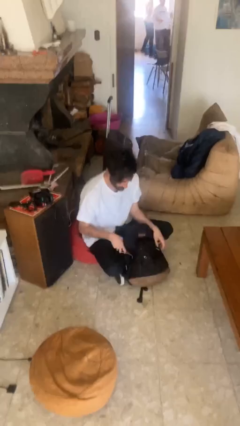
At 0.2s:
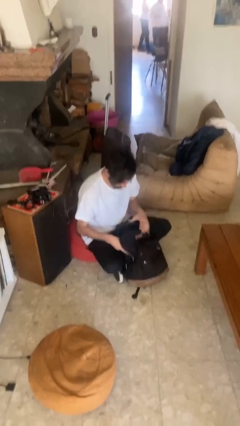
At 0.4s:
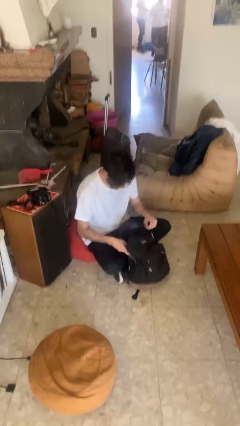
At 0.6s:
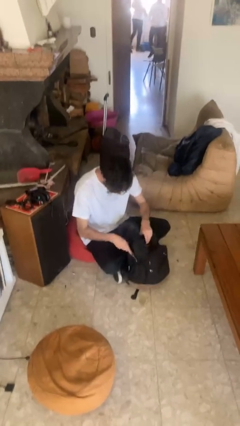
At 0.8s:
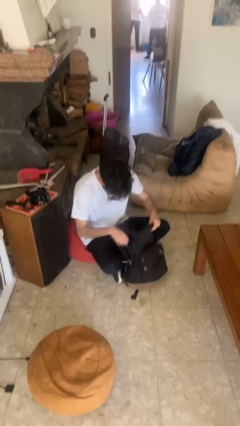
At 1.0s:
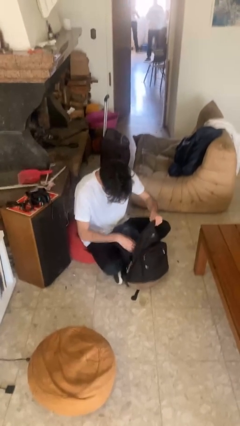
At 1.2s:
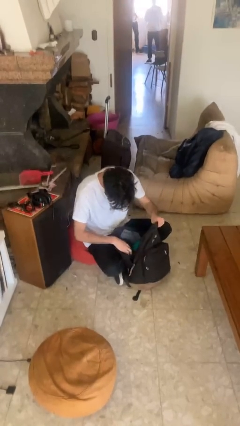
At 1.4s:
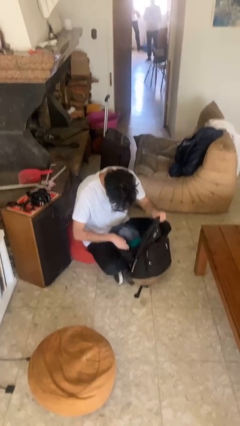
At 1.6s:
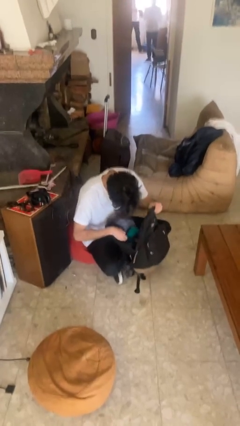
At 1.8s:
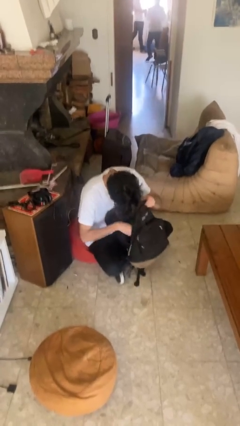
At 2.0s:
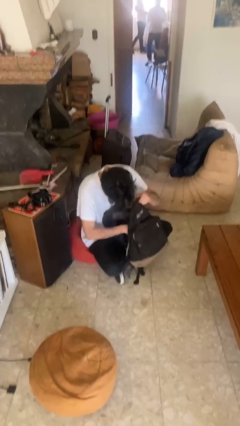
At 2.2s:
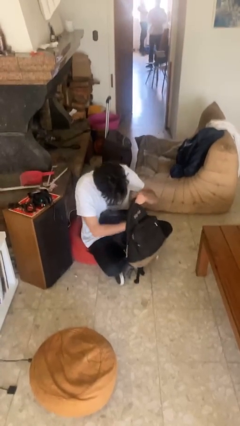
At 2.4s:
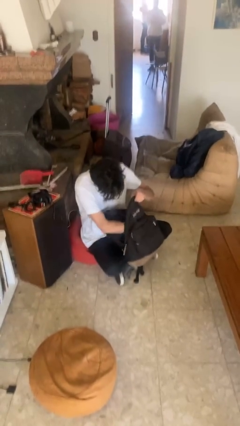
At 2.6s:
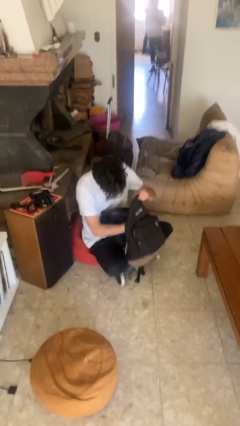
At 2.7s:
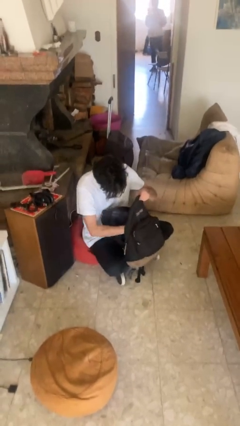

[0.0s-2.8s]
person searches in backpack

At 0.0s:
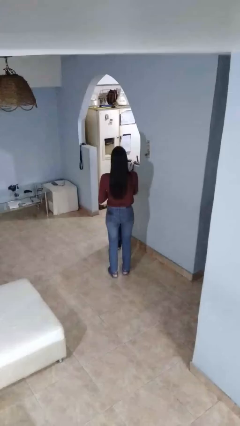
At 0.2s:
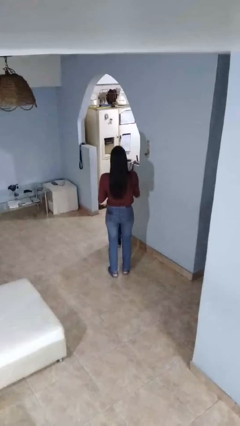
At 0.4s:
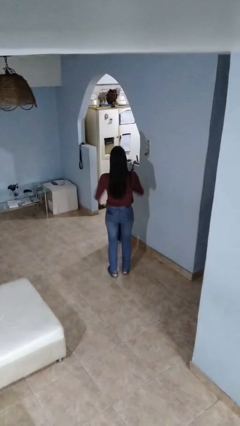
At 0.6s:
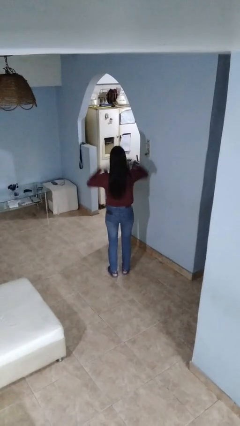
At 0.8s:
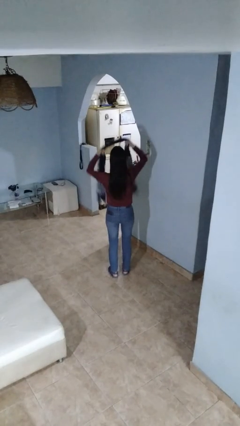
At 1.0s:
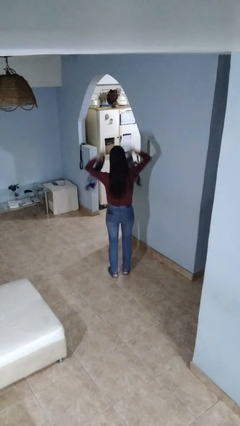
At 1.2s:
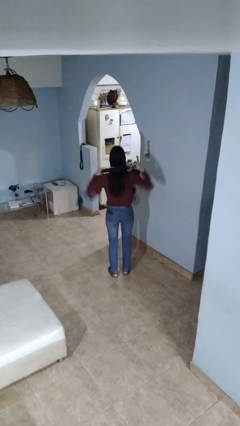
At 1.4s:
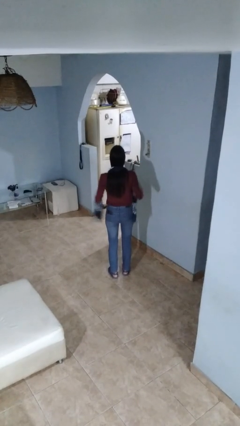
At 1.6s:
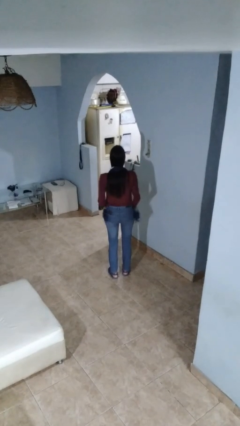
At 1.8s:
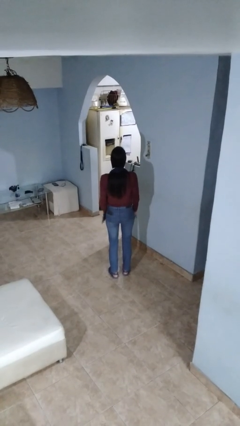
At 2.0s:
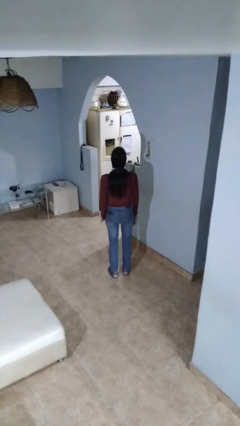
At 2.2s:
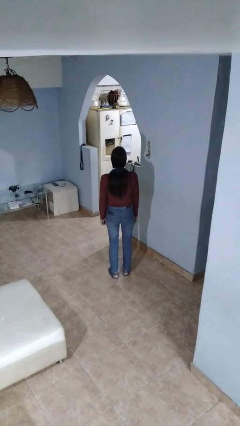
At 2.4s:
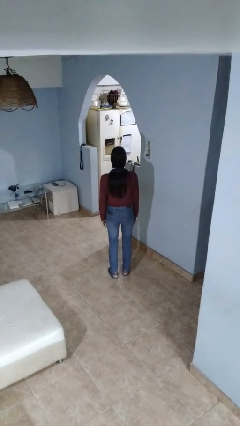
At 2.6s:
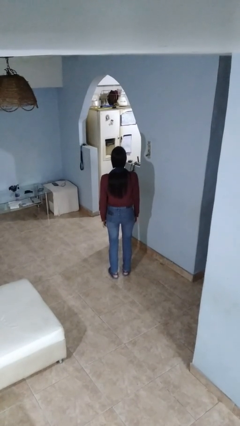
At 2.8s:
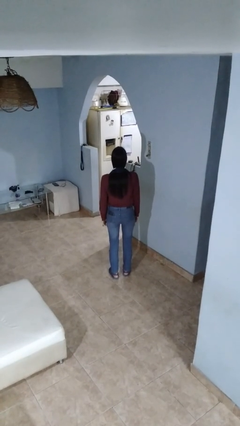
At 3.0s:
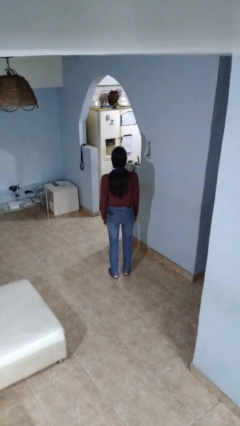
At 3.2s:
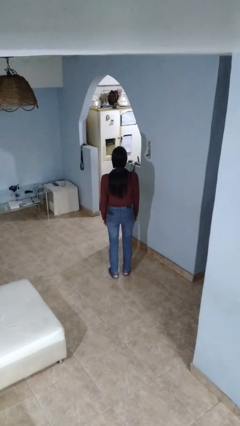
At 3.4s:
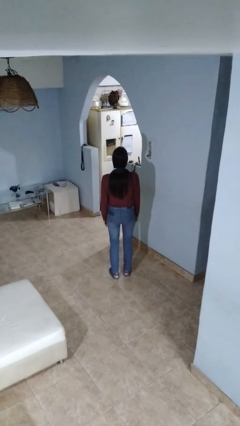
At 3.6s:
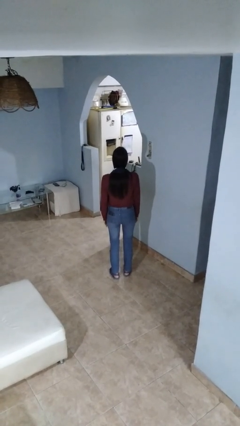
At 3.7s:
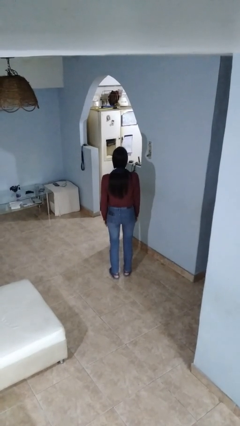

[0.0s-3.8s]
person puts on scarf

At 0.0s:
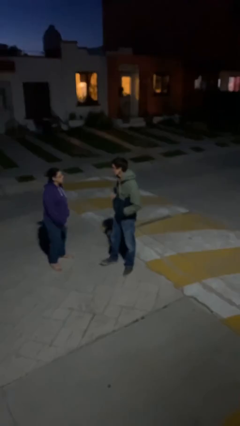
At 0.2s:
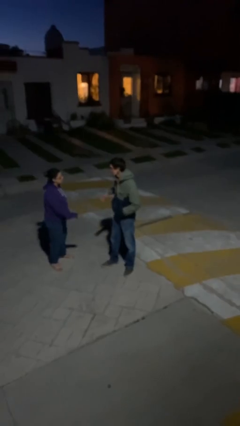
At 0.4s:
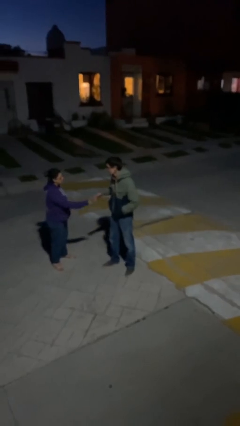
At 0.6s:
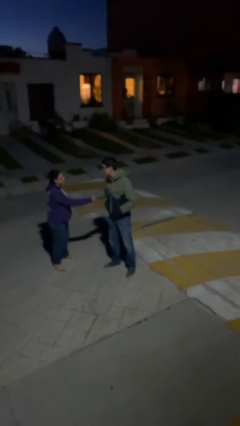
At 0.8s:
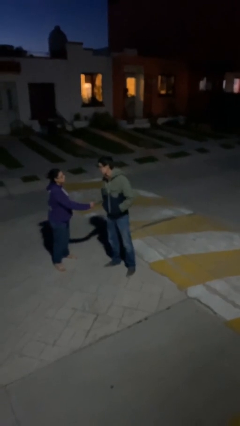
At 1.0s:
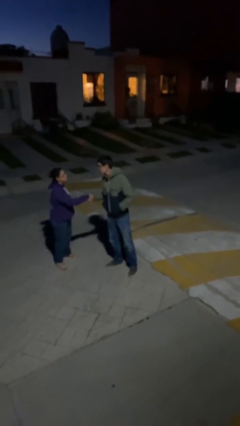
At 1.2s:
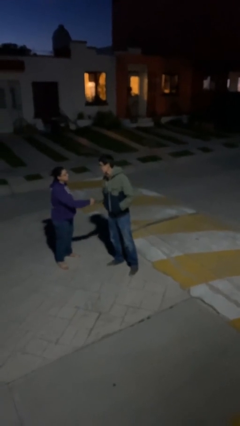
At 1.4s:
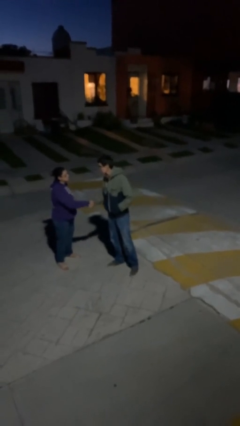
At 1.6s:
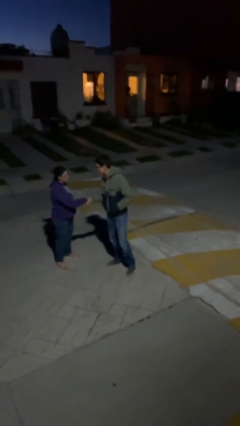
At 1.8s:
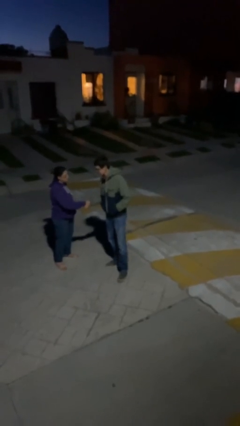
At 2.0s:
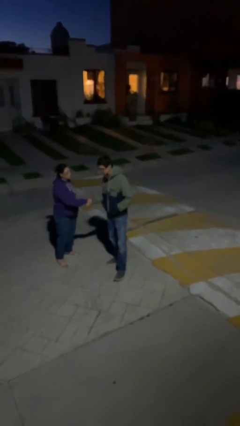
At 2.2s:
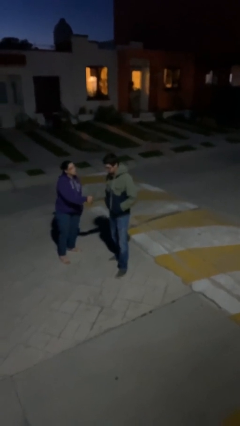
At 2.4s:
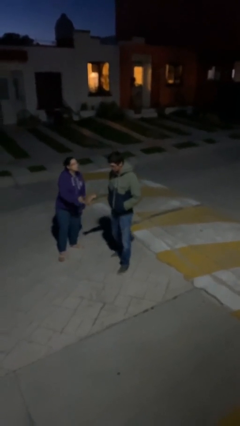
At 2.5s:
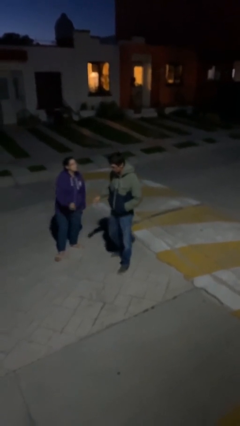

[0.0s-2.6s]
person shakes hand

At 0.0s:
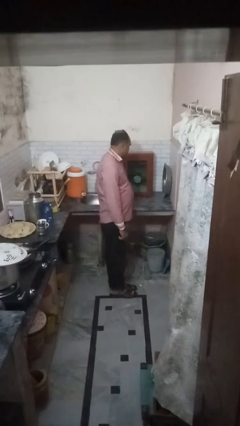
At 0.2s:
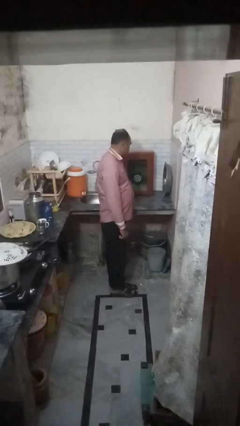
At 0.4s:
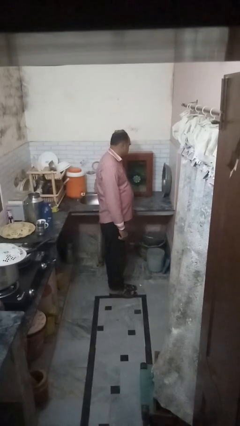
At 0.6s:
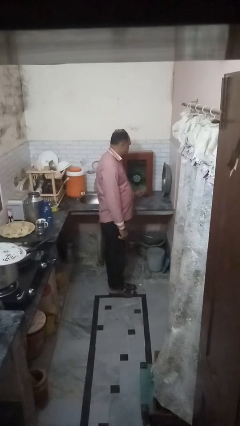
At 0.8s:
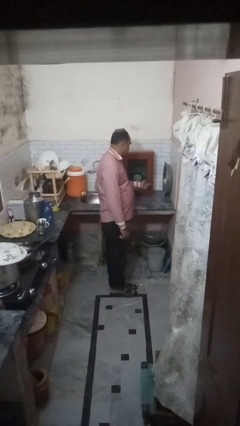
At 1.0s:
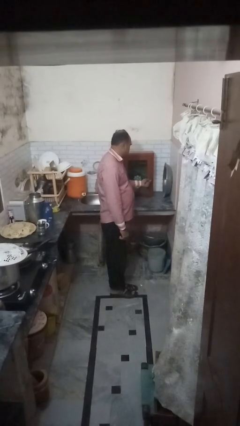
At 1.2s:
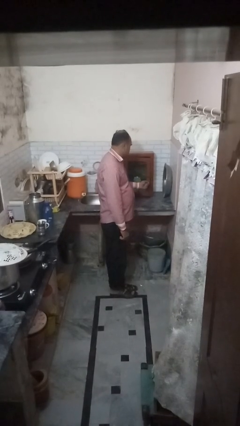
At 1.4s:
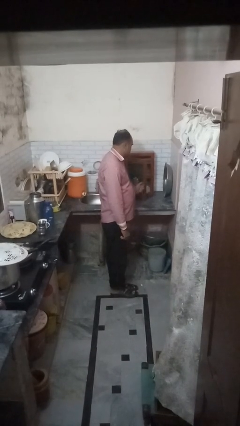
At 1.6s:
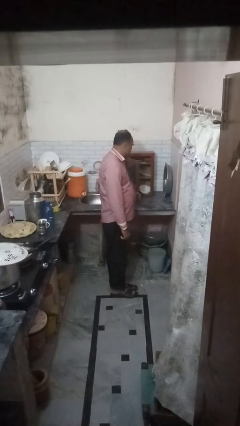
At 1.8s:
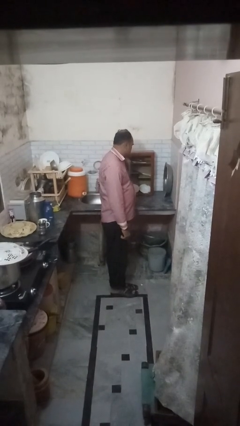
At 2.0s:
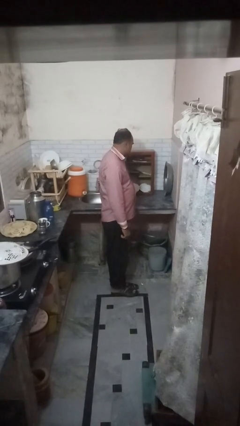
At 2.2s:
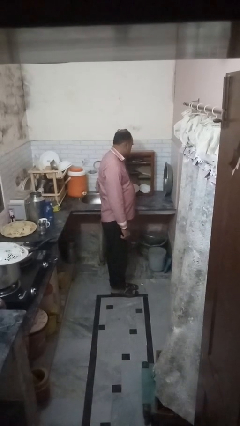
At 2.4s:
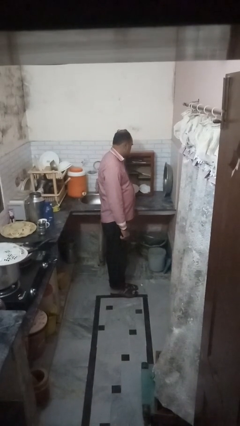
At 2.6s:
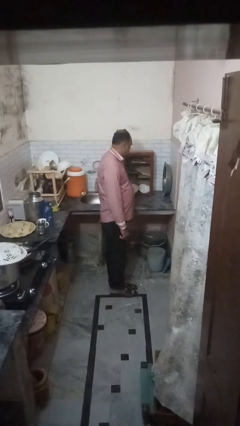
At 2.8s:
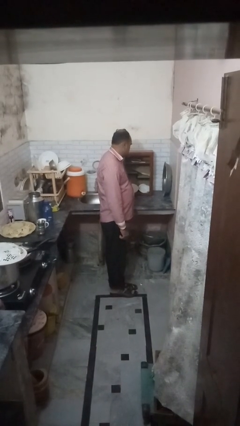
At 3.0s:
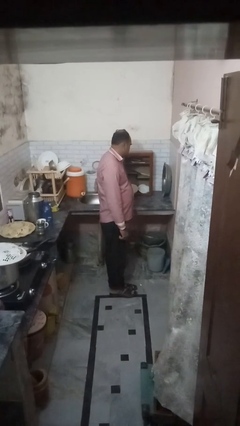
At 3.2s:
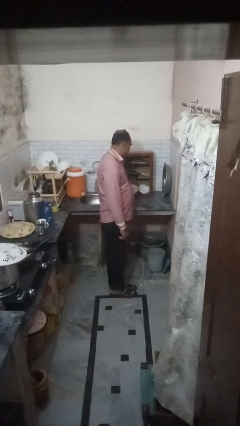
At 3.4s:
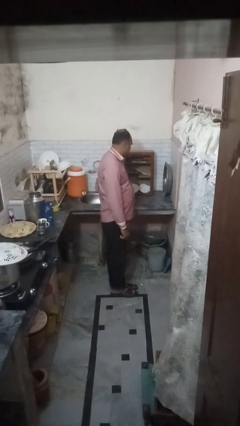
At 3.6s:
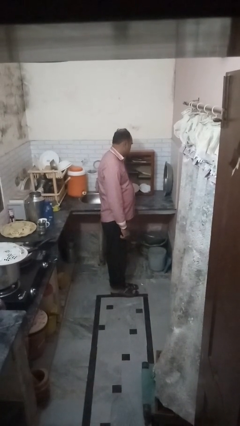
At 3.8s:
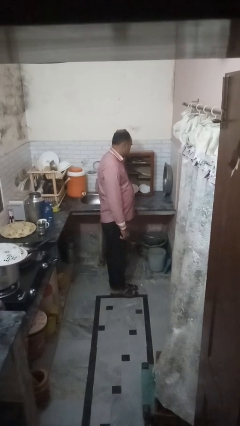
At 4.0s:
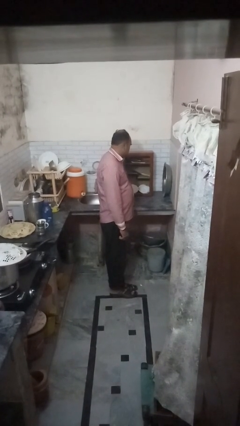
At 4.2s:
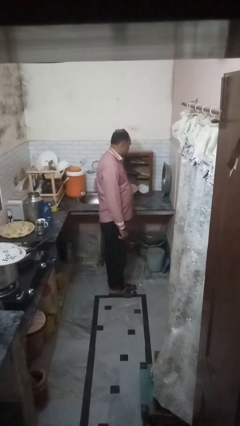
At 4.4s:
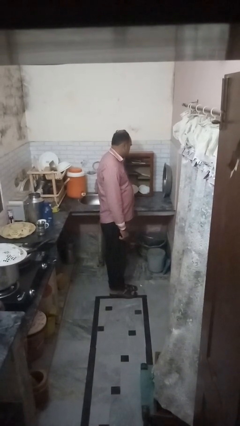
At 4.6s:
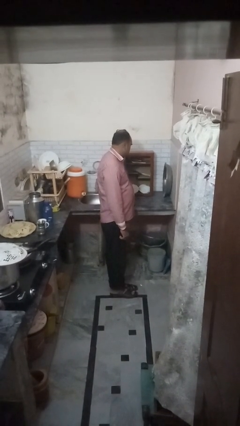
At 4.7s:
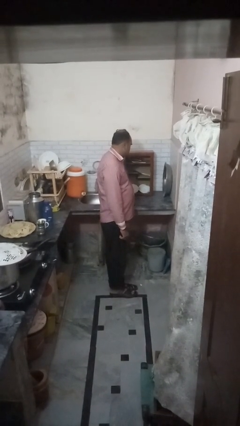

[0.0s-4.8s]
person opens cabinet

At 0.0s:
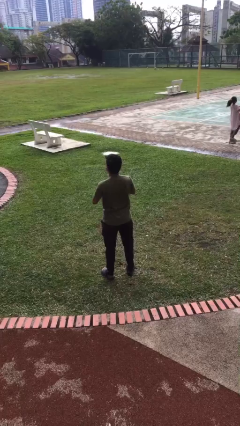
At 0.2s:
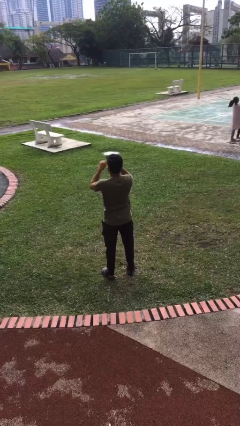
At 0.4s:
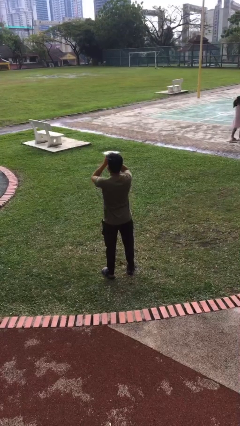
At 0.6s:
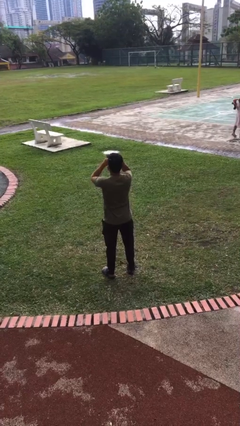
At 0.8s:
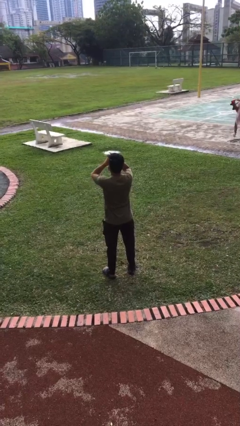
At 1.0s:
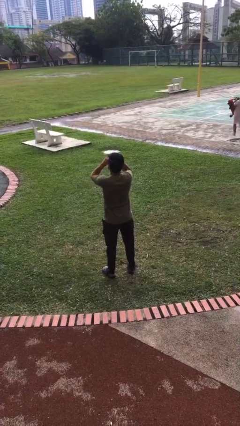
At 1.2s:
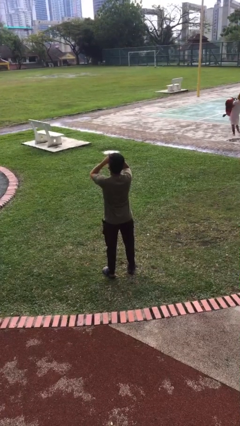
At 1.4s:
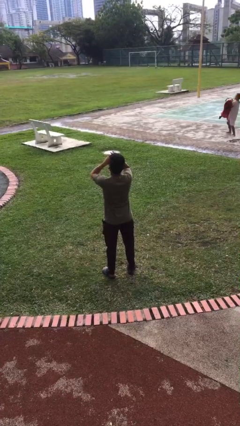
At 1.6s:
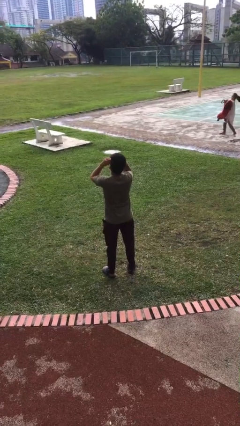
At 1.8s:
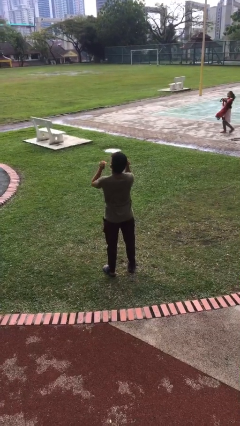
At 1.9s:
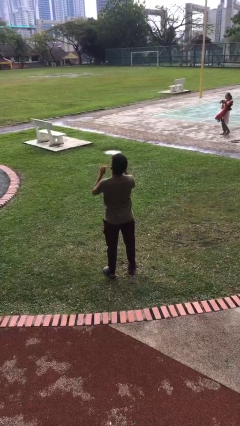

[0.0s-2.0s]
person rubs eyes

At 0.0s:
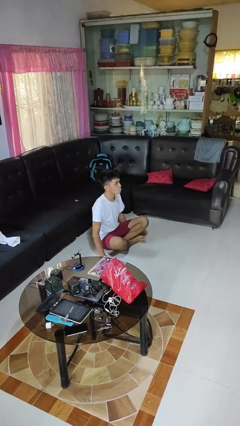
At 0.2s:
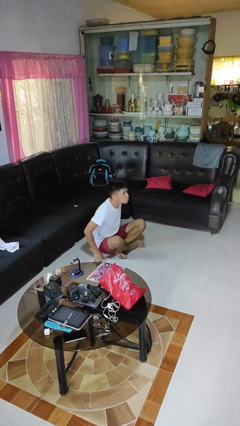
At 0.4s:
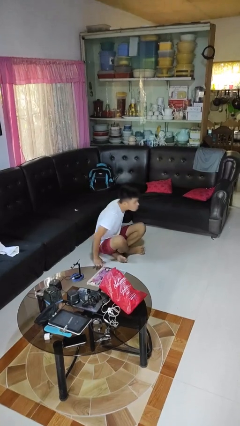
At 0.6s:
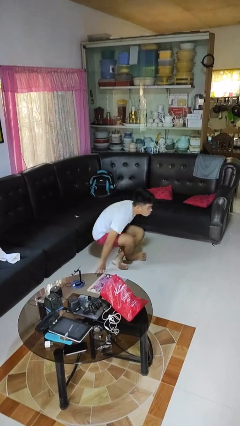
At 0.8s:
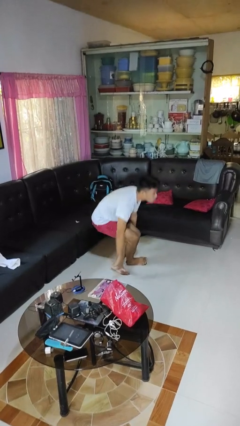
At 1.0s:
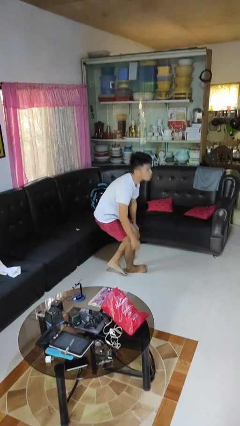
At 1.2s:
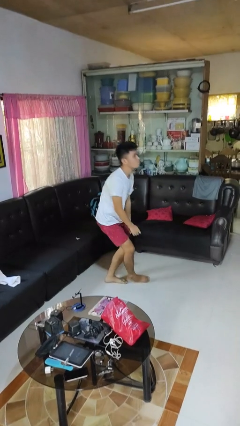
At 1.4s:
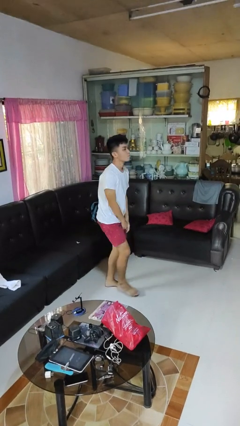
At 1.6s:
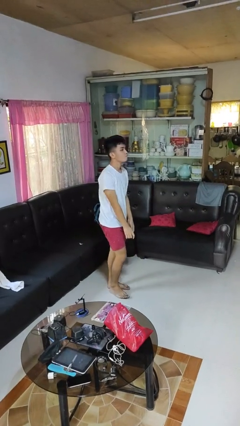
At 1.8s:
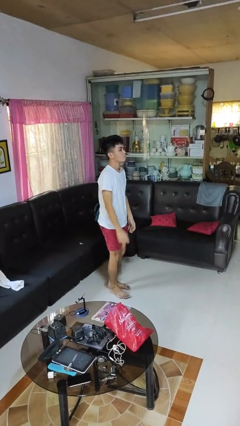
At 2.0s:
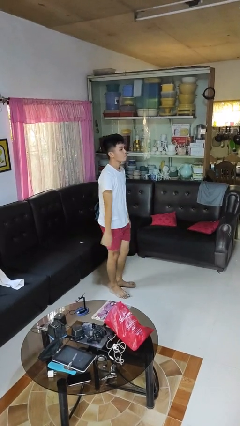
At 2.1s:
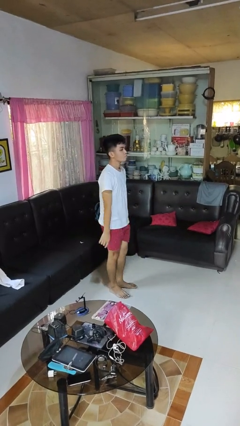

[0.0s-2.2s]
person stands up from floor
